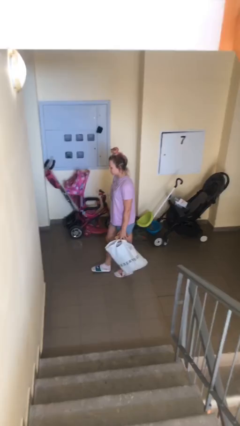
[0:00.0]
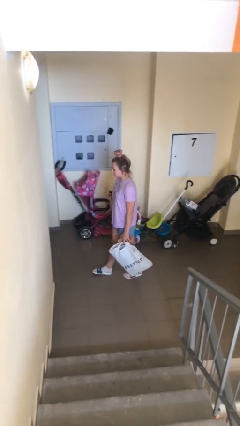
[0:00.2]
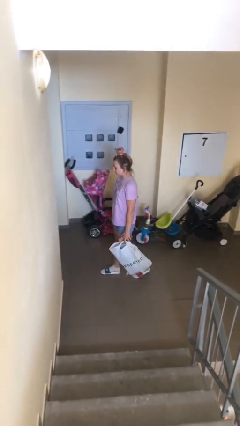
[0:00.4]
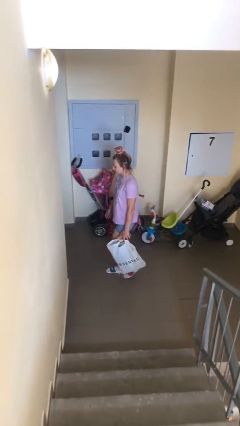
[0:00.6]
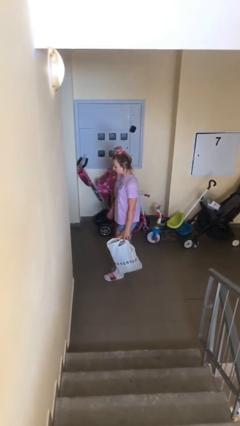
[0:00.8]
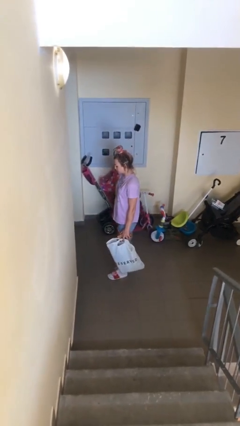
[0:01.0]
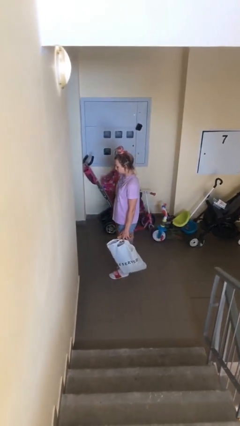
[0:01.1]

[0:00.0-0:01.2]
person carries groceries

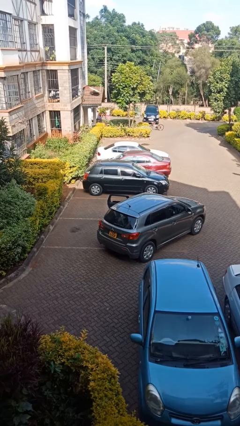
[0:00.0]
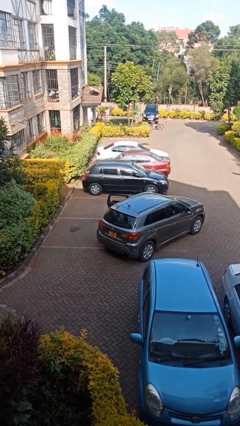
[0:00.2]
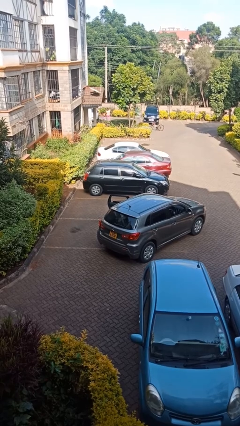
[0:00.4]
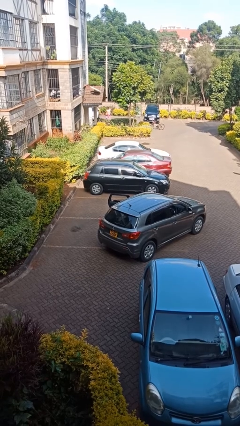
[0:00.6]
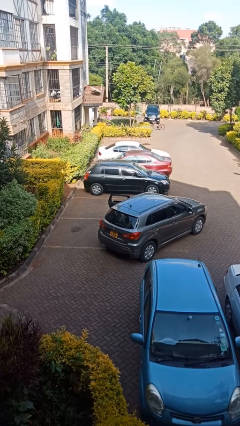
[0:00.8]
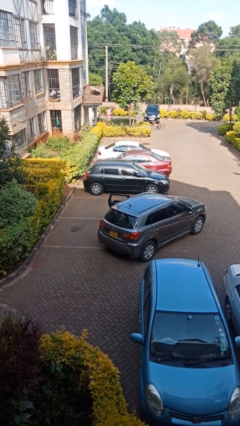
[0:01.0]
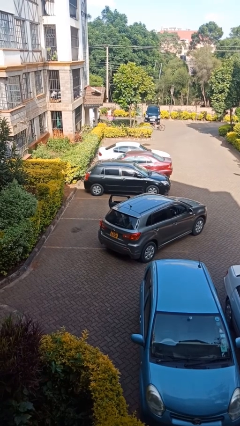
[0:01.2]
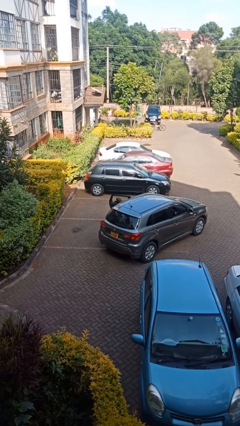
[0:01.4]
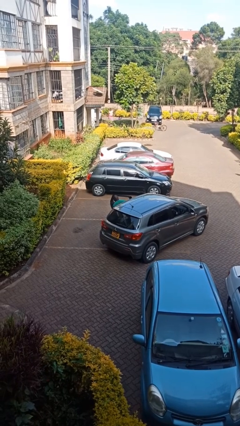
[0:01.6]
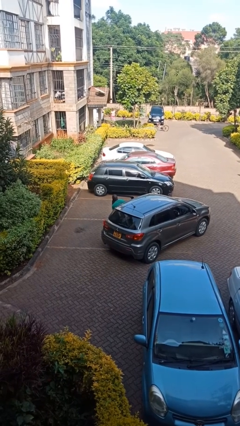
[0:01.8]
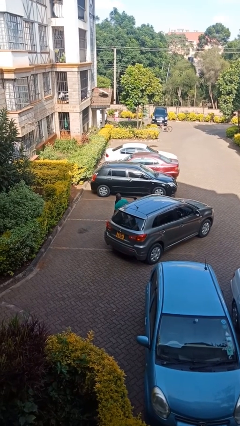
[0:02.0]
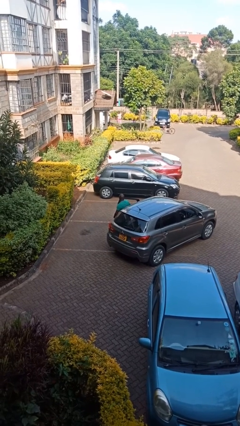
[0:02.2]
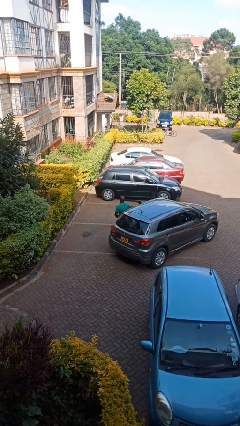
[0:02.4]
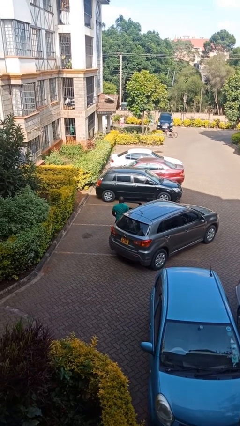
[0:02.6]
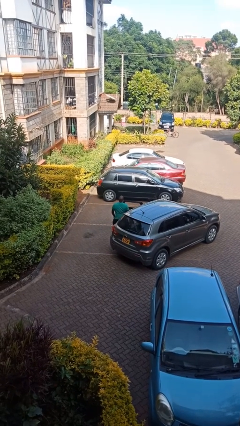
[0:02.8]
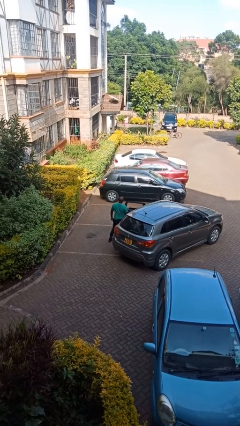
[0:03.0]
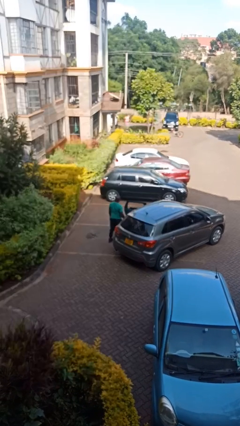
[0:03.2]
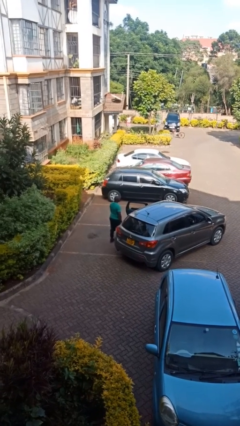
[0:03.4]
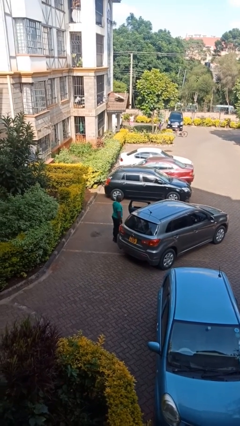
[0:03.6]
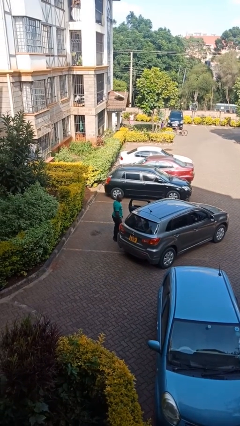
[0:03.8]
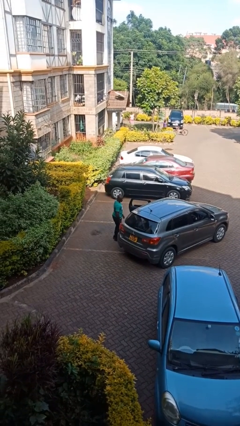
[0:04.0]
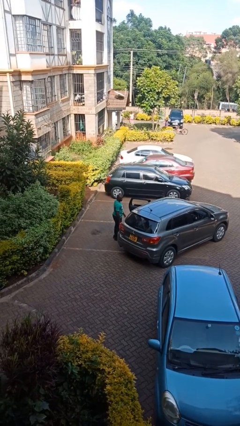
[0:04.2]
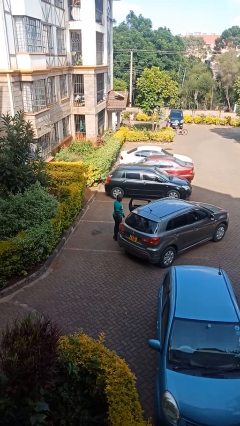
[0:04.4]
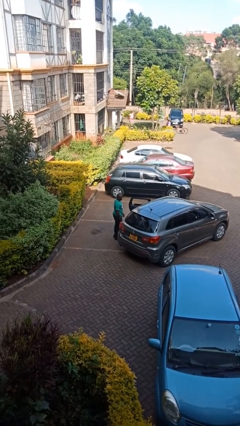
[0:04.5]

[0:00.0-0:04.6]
person exits car

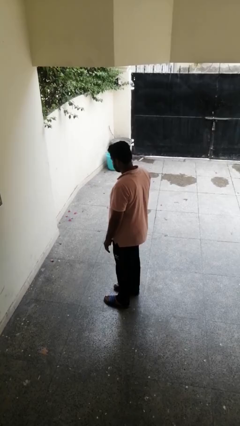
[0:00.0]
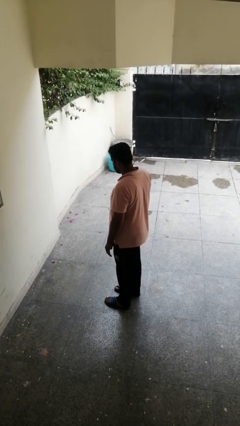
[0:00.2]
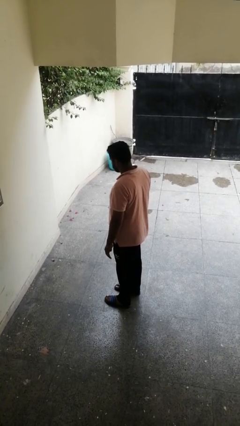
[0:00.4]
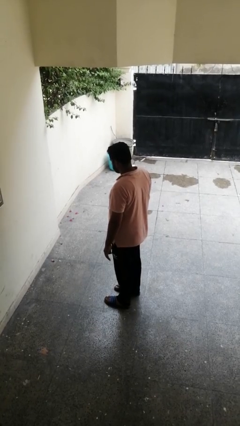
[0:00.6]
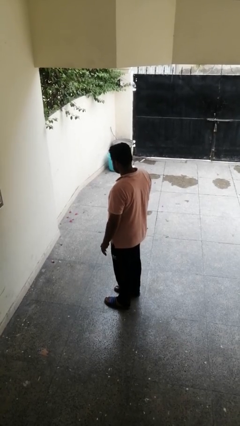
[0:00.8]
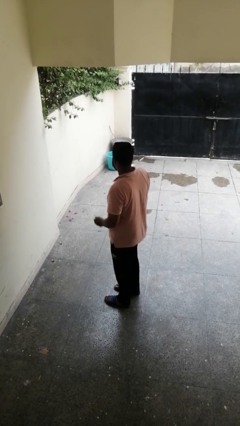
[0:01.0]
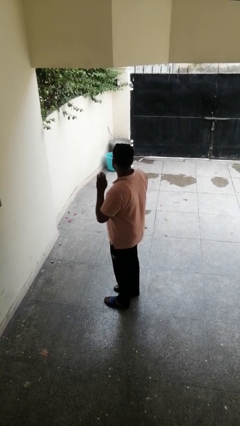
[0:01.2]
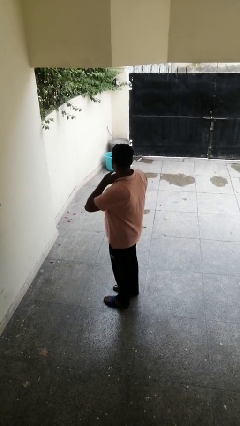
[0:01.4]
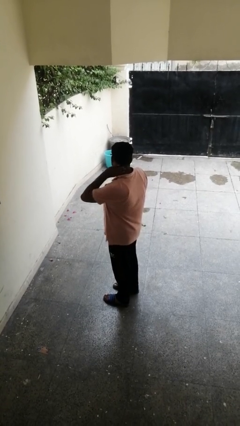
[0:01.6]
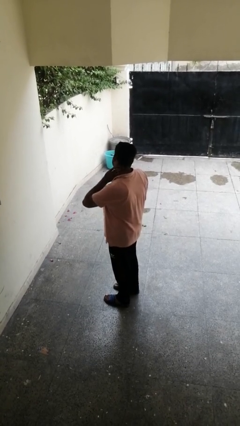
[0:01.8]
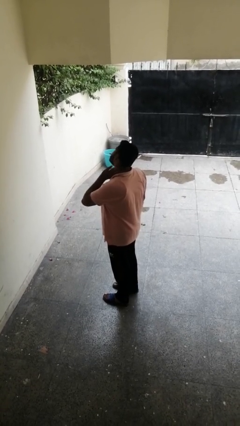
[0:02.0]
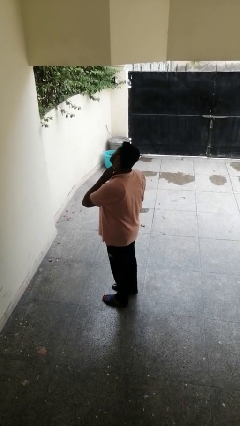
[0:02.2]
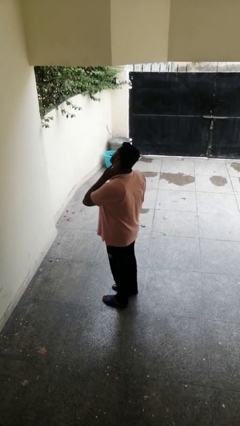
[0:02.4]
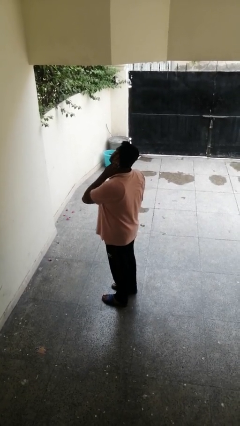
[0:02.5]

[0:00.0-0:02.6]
person rubs neck

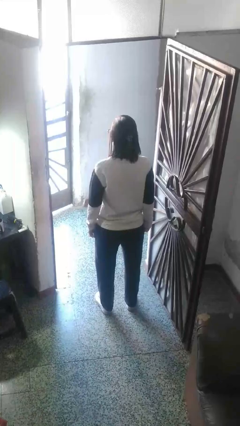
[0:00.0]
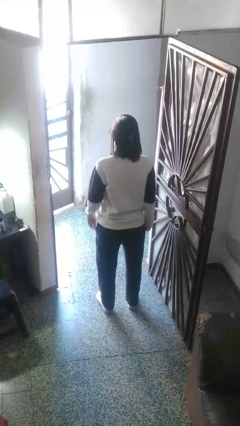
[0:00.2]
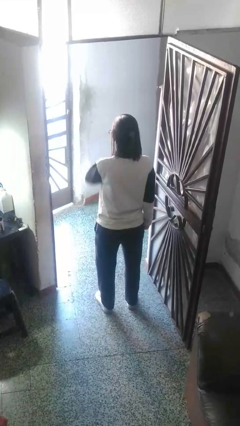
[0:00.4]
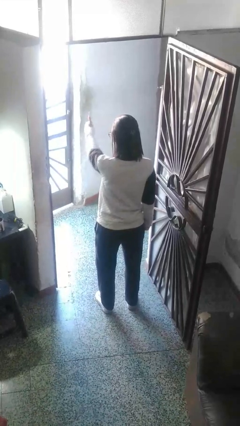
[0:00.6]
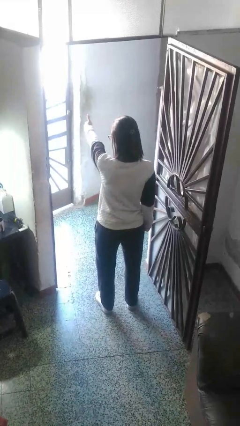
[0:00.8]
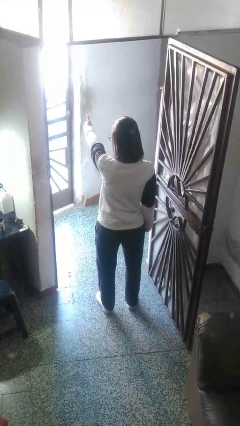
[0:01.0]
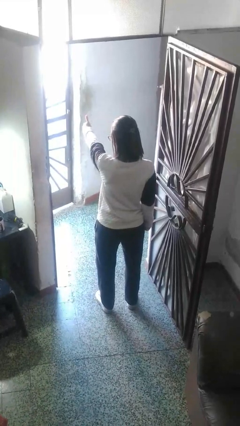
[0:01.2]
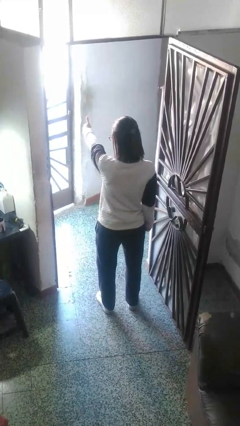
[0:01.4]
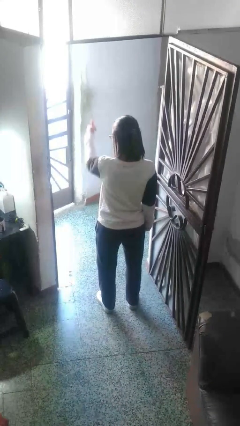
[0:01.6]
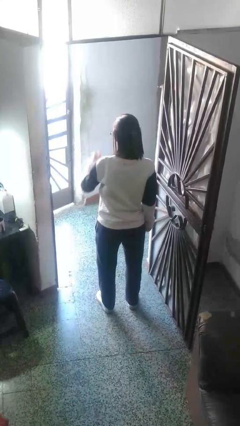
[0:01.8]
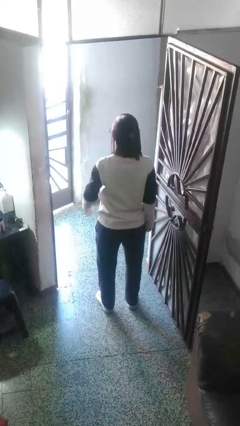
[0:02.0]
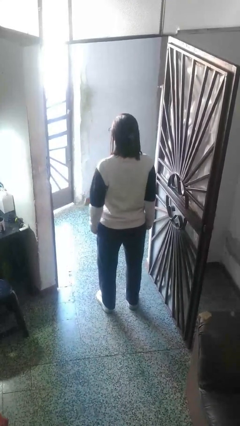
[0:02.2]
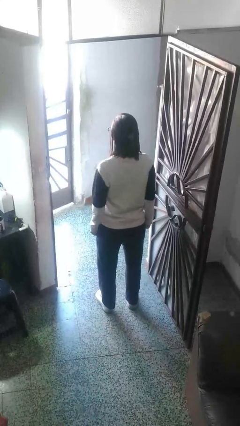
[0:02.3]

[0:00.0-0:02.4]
person gestures thumbs up

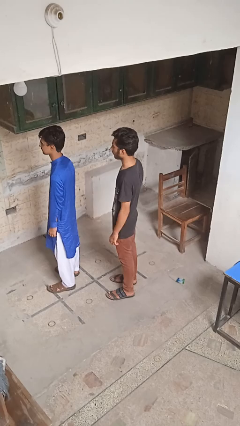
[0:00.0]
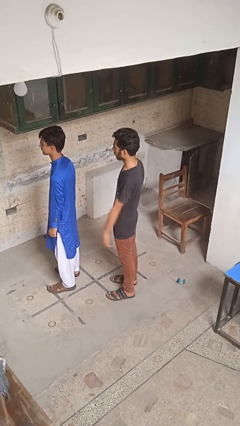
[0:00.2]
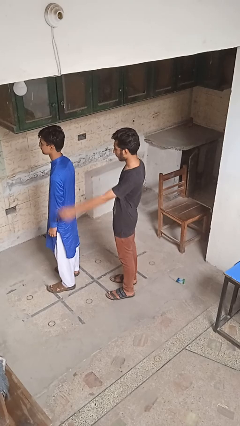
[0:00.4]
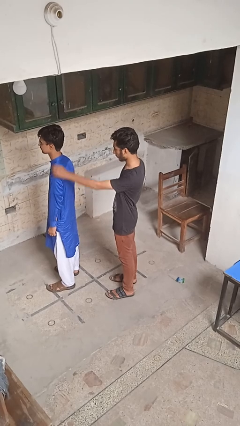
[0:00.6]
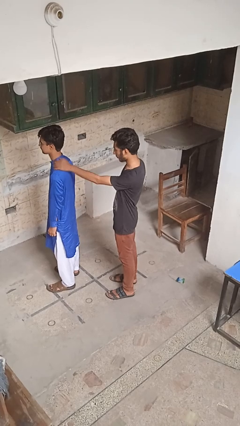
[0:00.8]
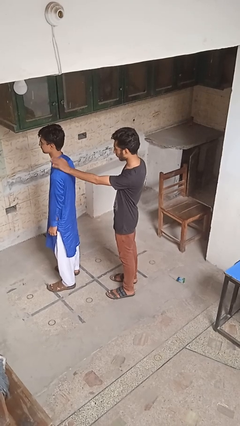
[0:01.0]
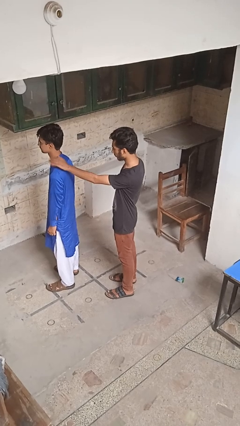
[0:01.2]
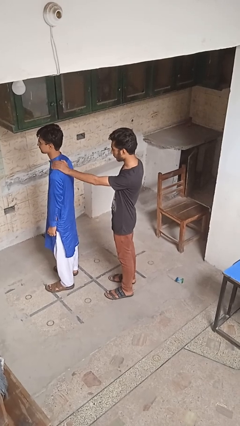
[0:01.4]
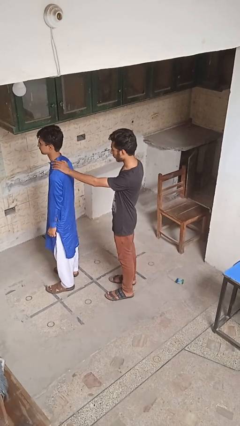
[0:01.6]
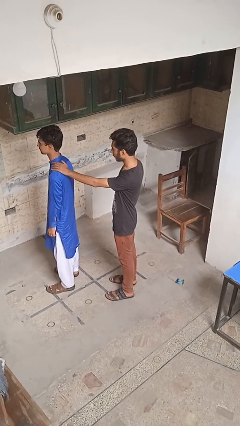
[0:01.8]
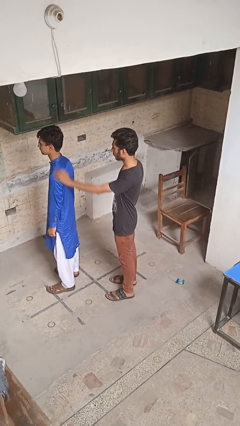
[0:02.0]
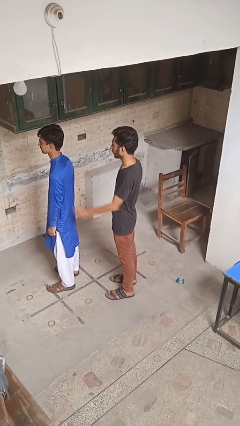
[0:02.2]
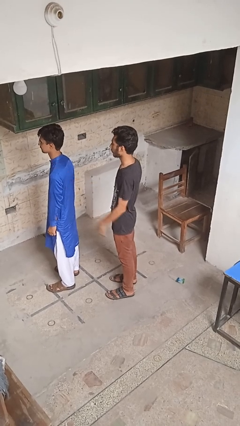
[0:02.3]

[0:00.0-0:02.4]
person touches back of person

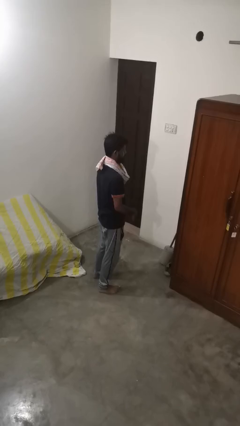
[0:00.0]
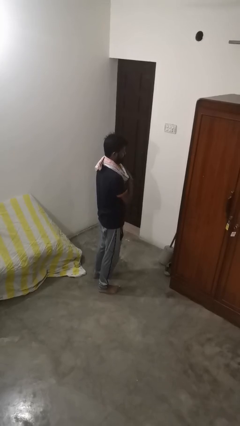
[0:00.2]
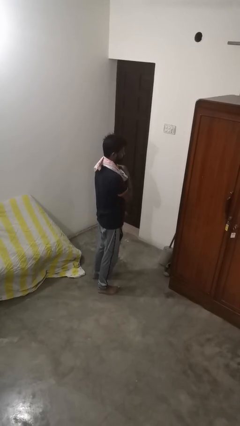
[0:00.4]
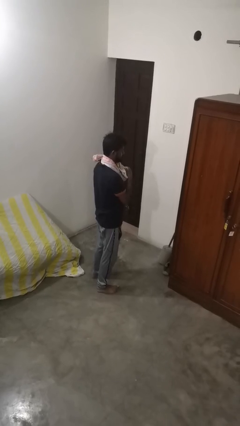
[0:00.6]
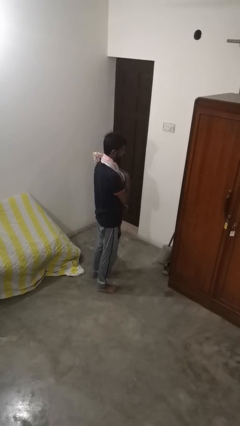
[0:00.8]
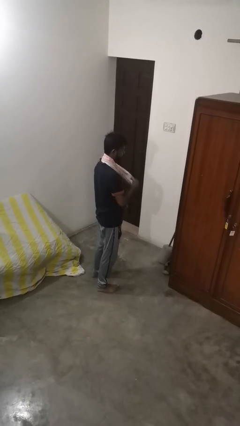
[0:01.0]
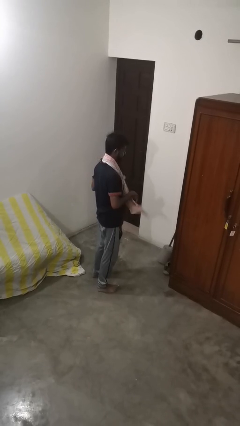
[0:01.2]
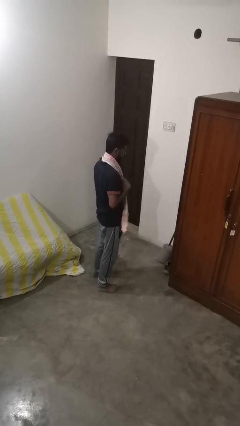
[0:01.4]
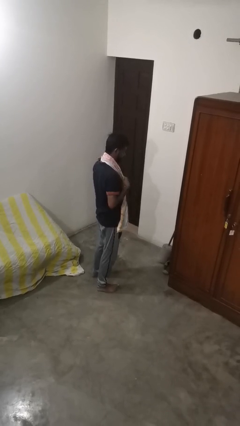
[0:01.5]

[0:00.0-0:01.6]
person takes off scarf

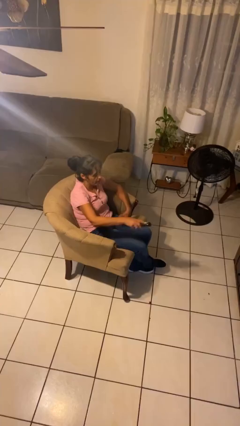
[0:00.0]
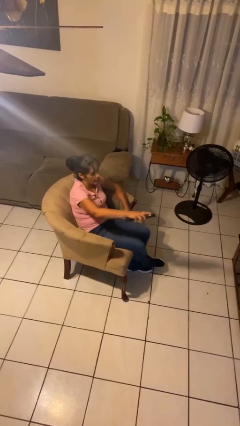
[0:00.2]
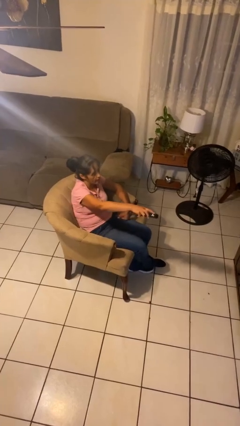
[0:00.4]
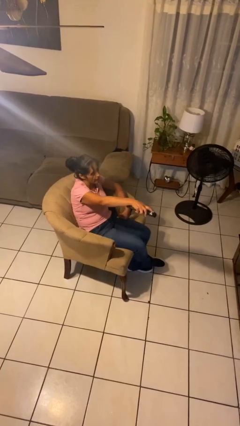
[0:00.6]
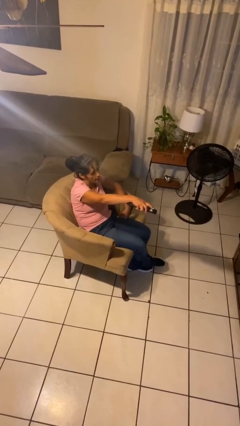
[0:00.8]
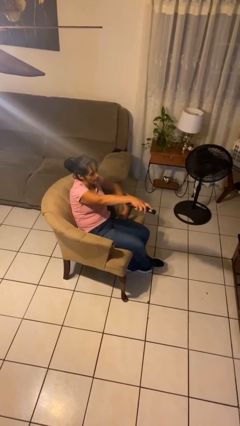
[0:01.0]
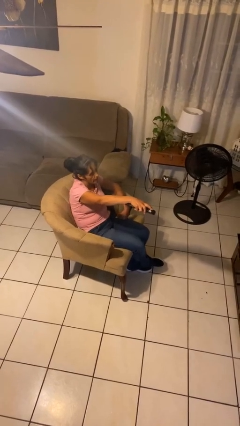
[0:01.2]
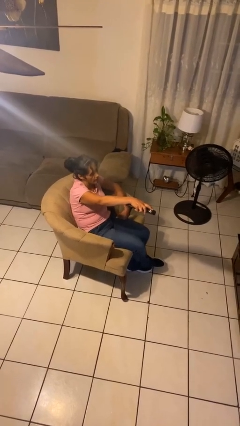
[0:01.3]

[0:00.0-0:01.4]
person uses television remote

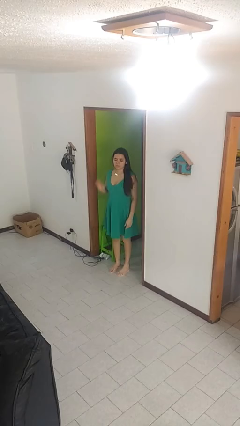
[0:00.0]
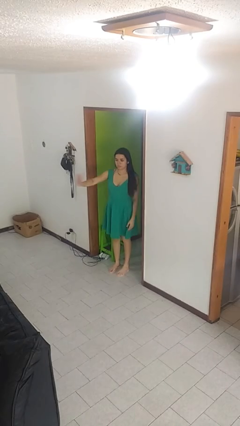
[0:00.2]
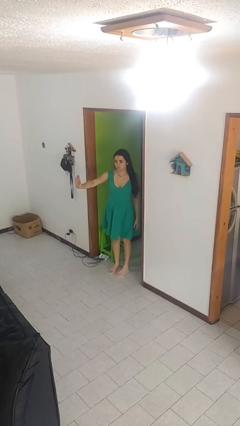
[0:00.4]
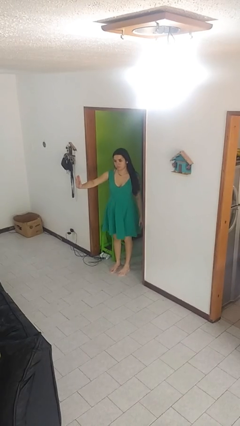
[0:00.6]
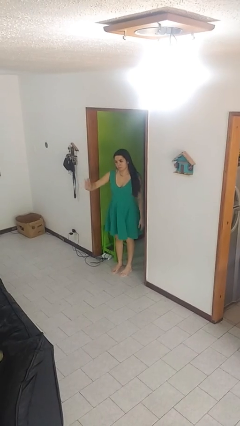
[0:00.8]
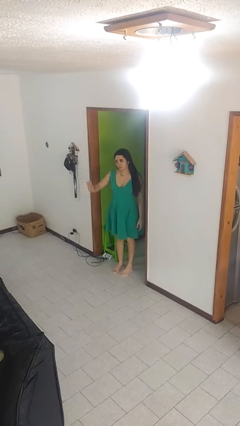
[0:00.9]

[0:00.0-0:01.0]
person gestures stop
